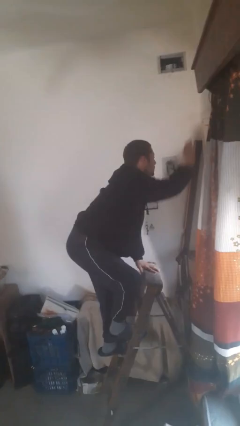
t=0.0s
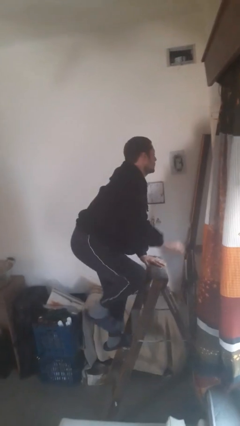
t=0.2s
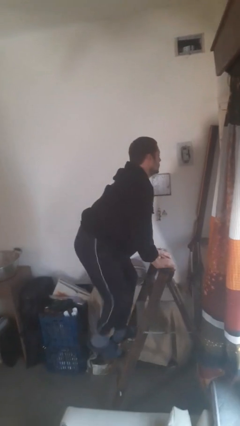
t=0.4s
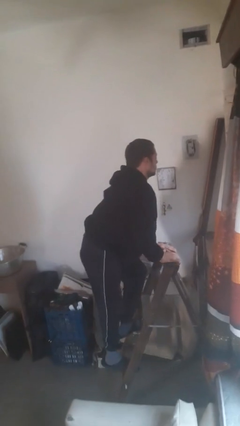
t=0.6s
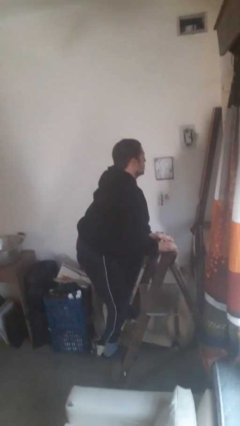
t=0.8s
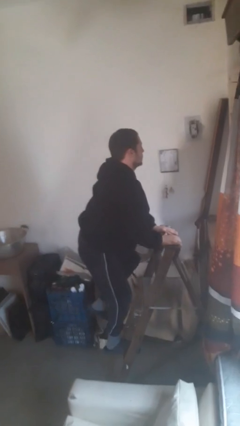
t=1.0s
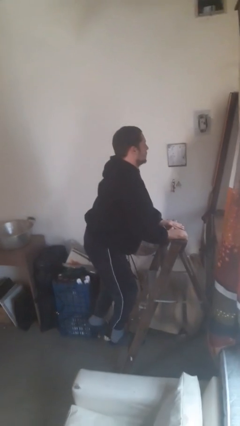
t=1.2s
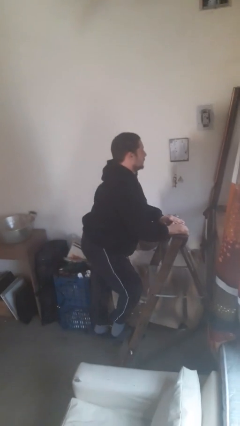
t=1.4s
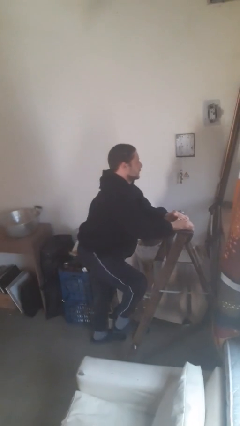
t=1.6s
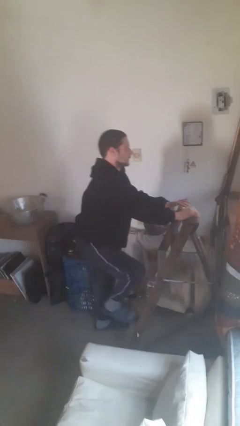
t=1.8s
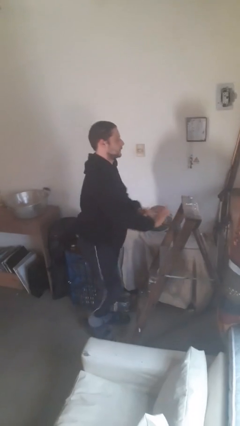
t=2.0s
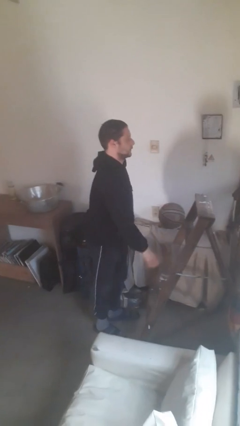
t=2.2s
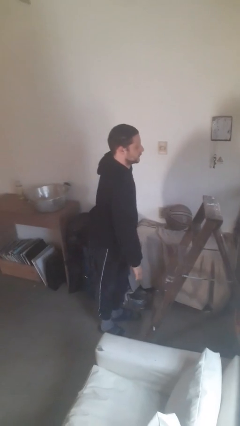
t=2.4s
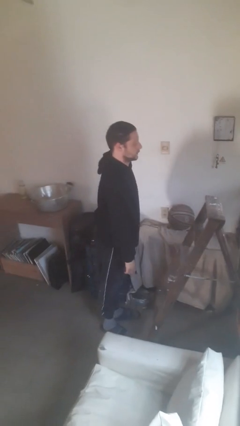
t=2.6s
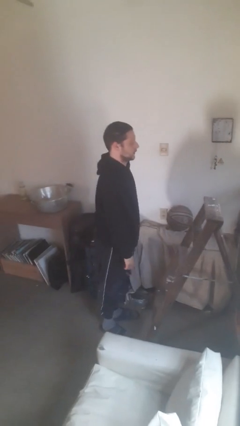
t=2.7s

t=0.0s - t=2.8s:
person climbs down ladder

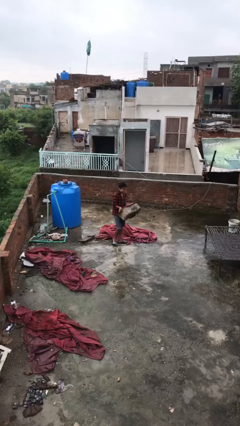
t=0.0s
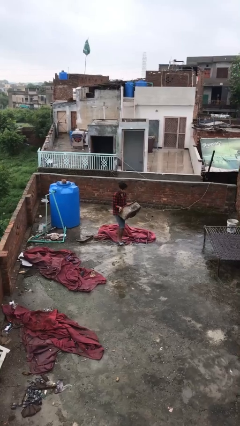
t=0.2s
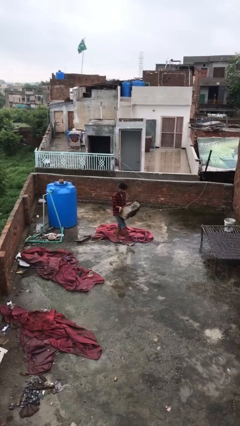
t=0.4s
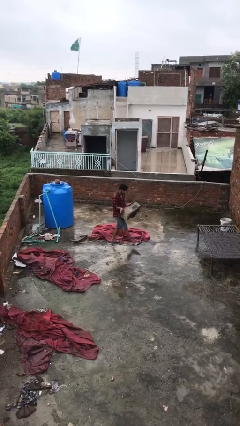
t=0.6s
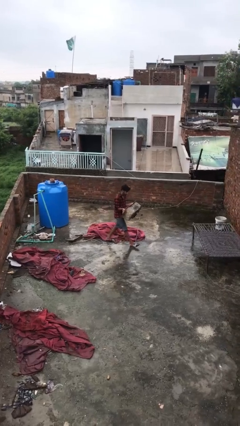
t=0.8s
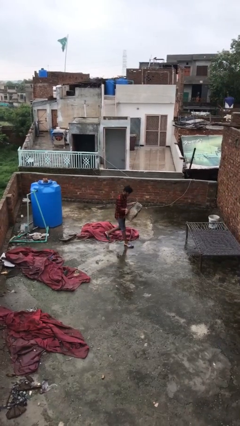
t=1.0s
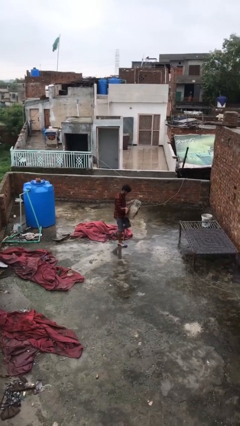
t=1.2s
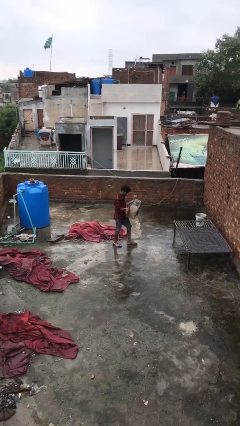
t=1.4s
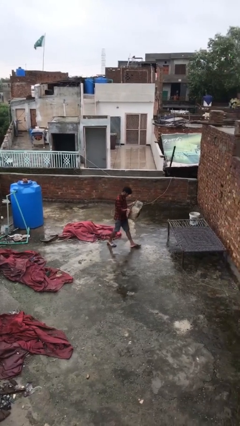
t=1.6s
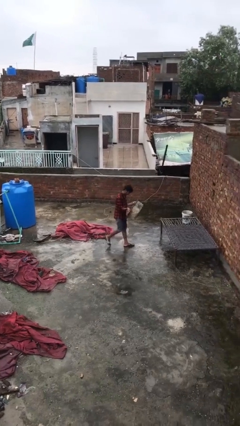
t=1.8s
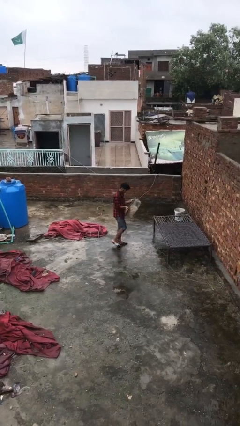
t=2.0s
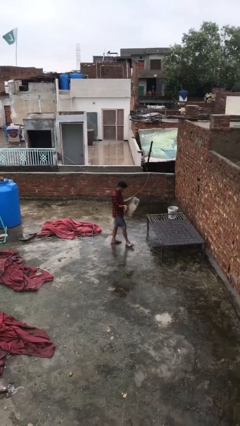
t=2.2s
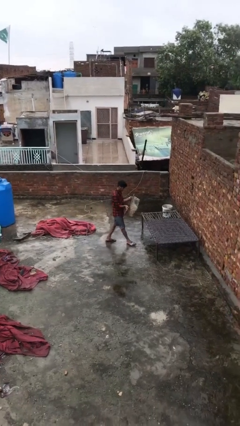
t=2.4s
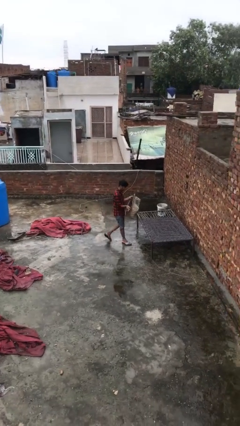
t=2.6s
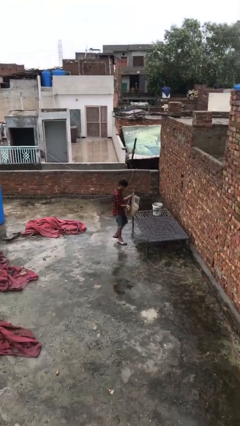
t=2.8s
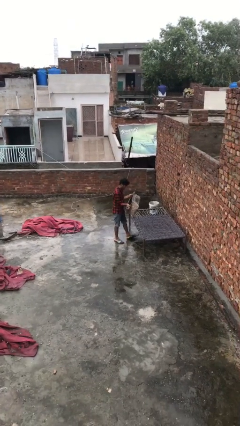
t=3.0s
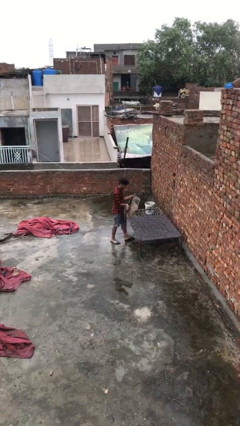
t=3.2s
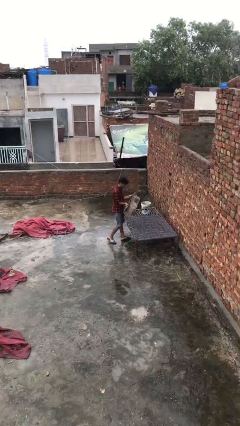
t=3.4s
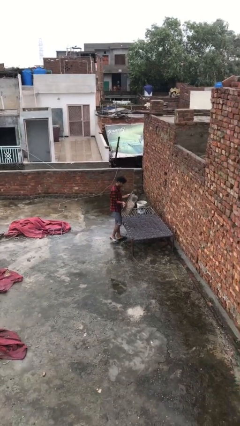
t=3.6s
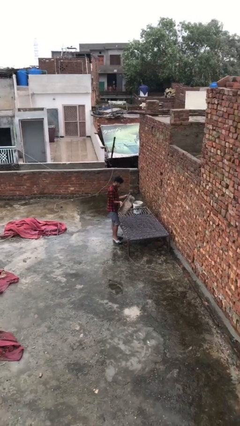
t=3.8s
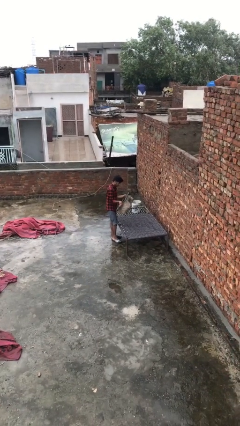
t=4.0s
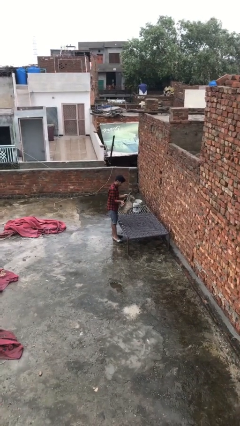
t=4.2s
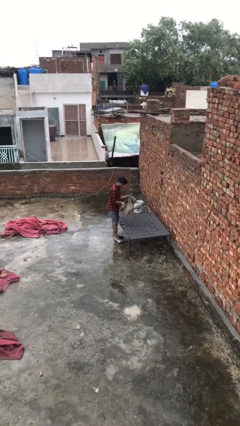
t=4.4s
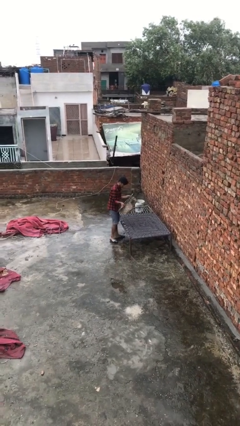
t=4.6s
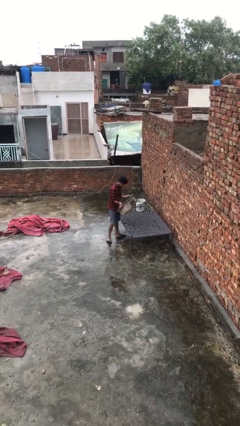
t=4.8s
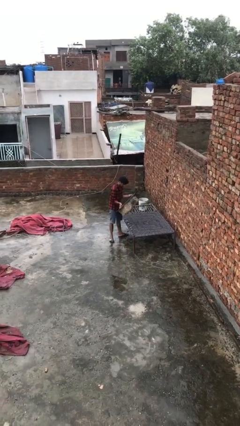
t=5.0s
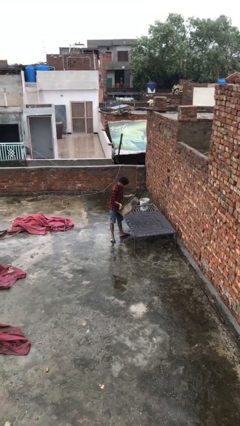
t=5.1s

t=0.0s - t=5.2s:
person carries heavy object

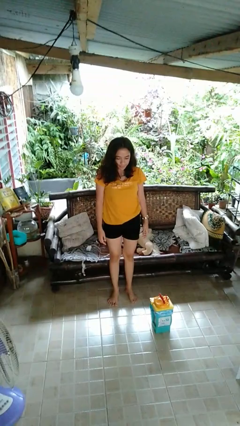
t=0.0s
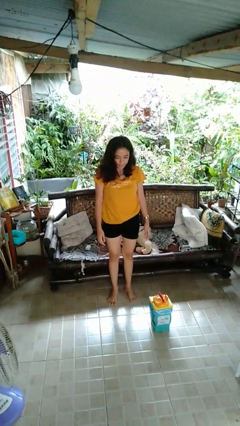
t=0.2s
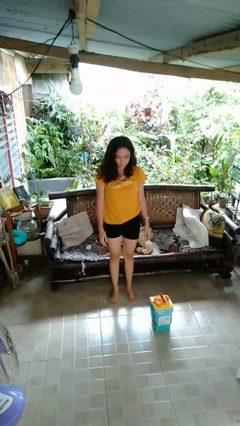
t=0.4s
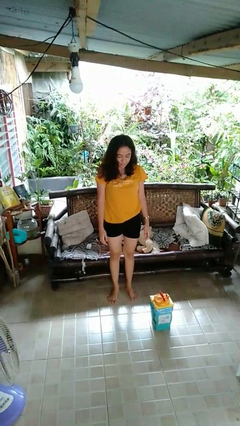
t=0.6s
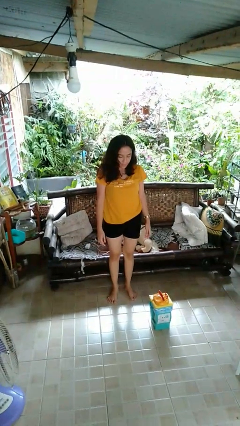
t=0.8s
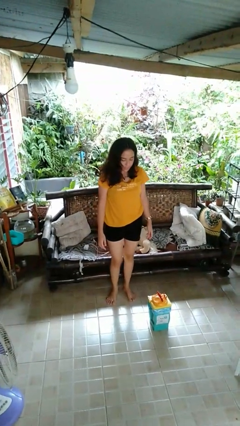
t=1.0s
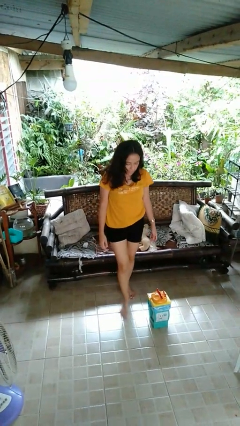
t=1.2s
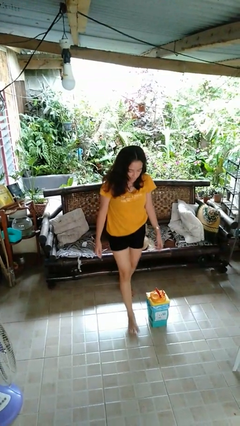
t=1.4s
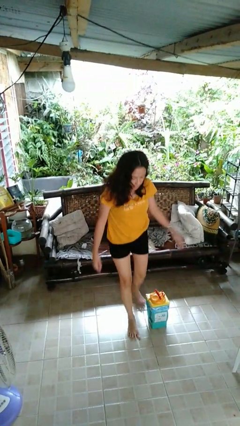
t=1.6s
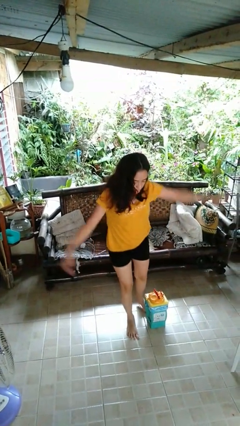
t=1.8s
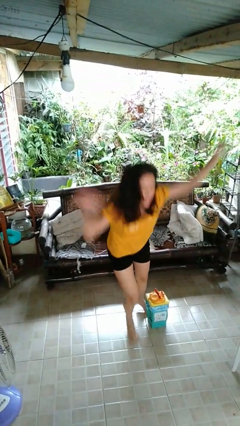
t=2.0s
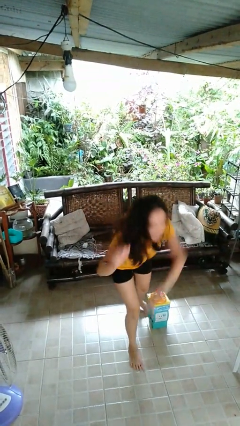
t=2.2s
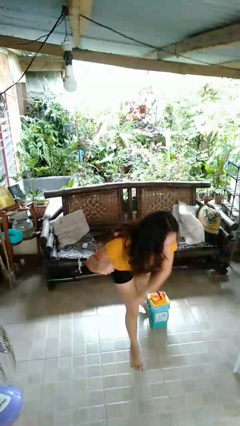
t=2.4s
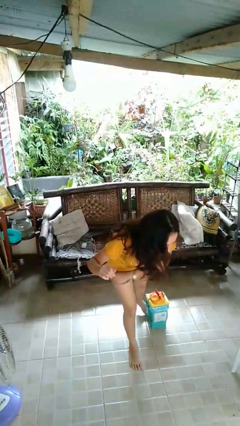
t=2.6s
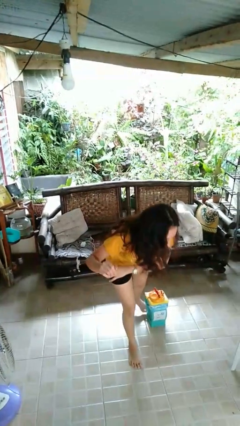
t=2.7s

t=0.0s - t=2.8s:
person trips on object on floor

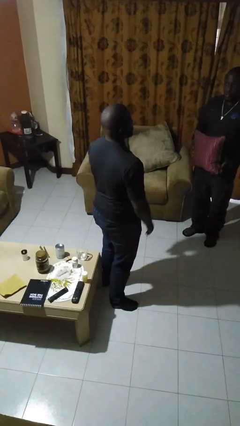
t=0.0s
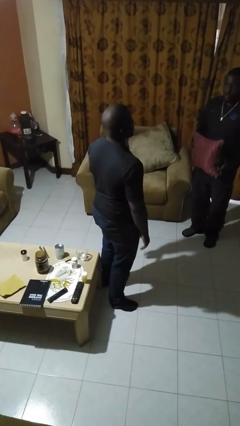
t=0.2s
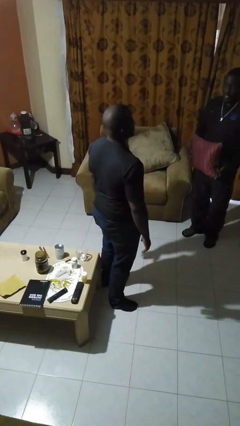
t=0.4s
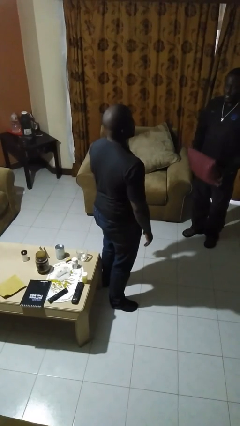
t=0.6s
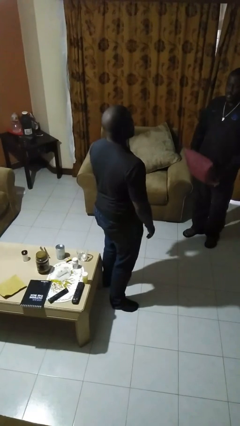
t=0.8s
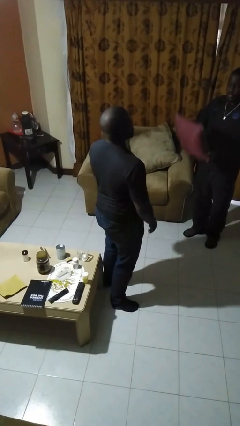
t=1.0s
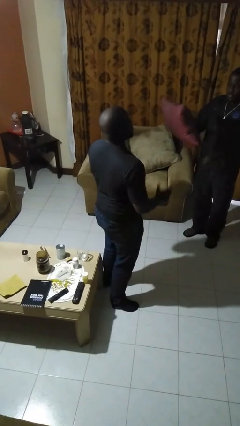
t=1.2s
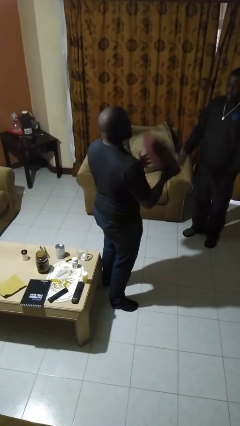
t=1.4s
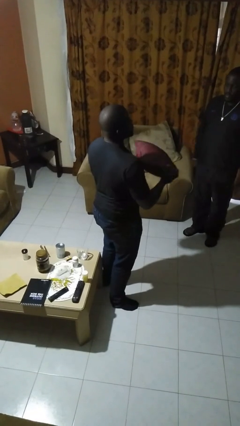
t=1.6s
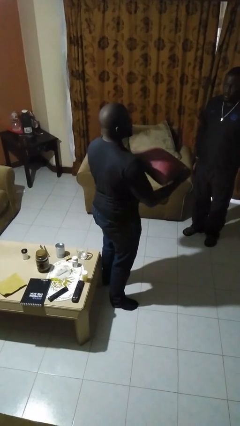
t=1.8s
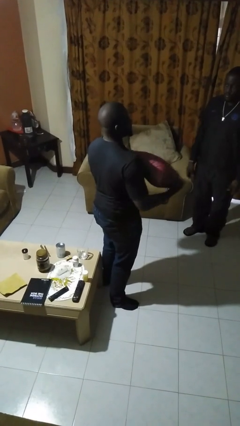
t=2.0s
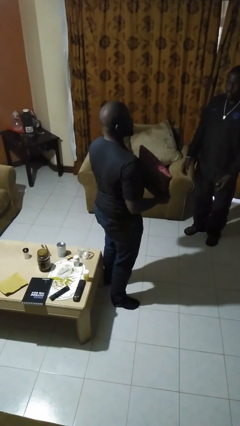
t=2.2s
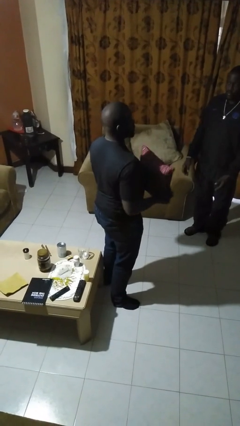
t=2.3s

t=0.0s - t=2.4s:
person catches object from person

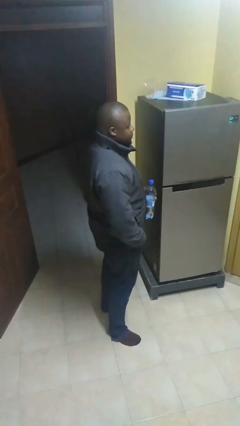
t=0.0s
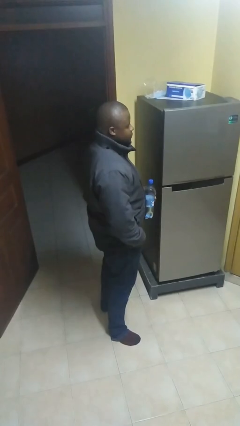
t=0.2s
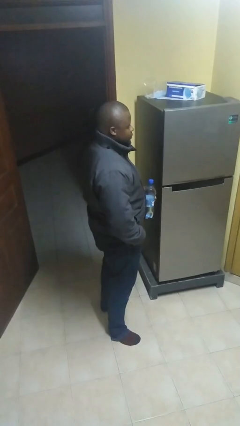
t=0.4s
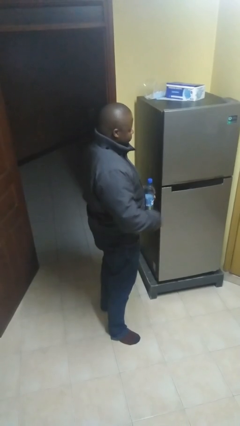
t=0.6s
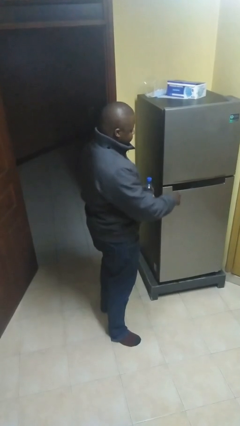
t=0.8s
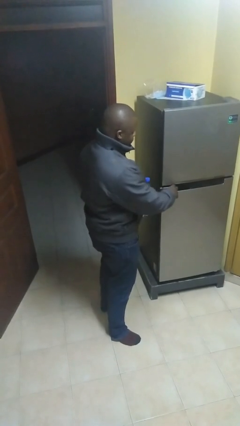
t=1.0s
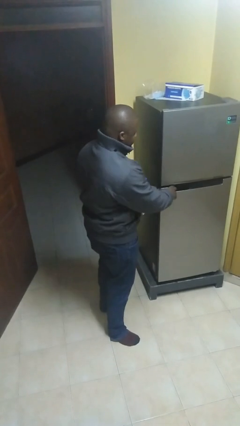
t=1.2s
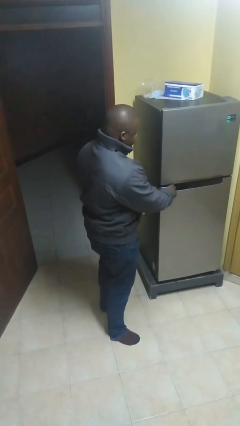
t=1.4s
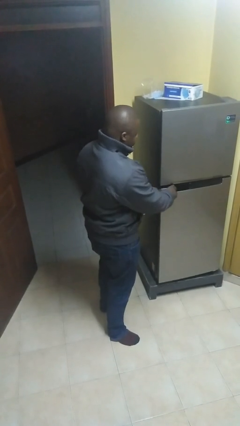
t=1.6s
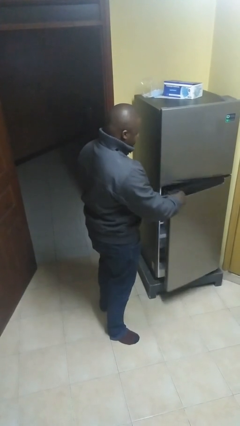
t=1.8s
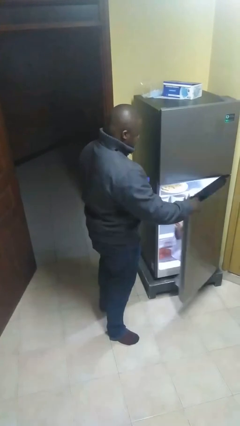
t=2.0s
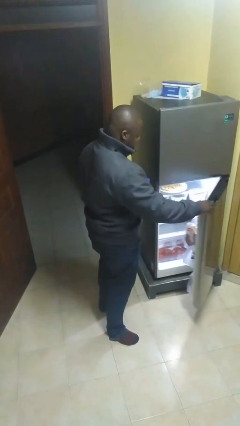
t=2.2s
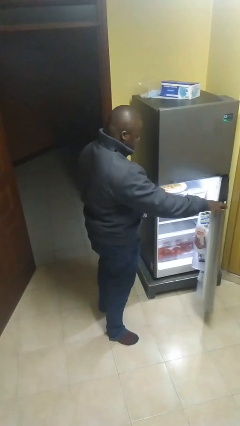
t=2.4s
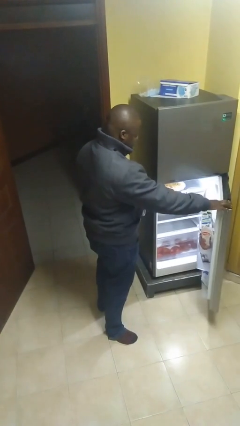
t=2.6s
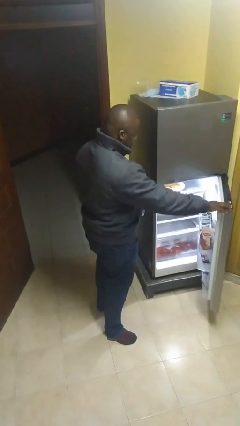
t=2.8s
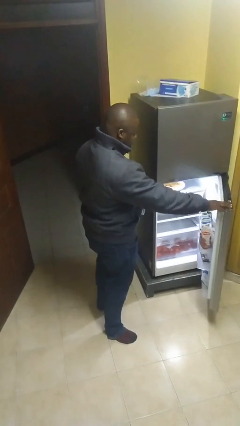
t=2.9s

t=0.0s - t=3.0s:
person opens refrigerator

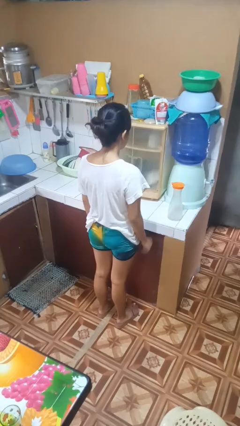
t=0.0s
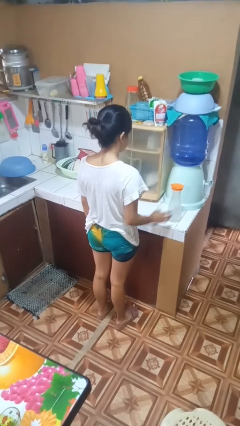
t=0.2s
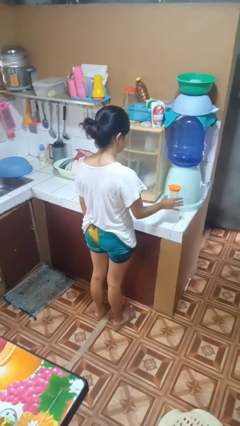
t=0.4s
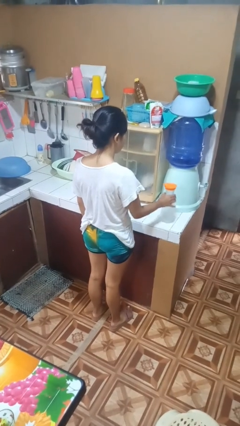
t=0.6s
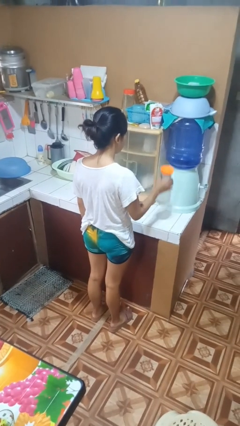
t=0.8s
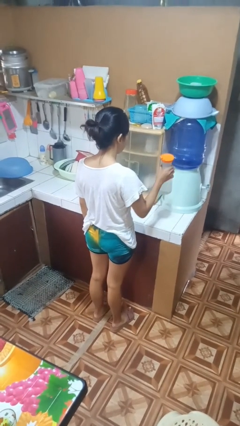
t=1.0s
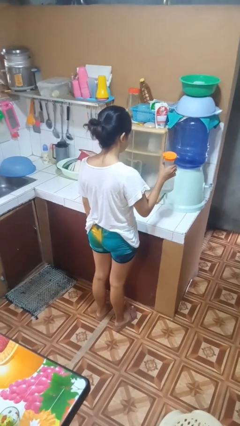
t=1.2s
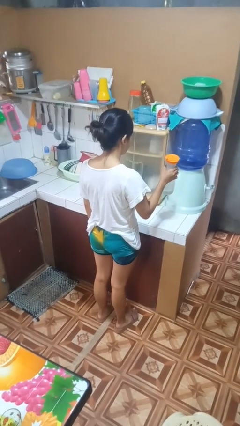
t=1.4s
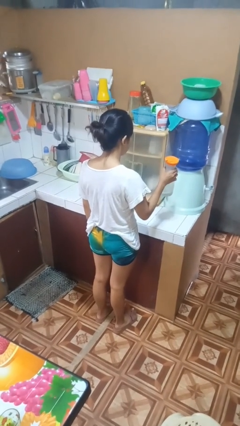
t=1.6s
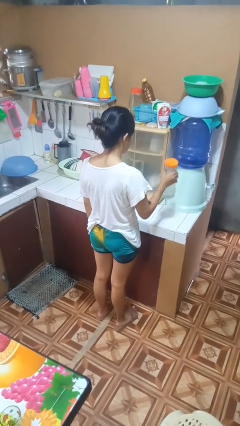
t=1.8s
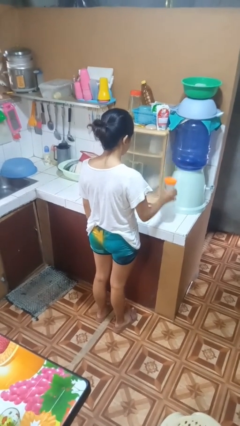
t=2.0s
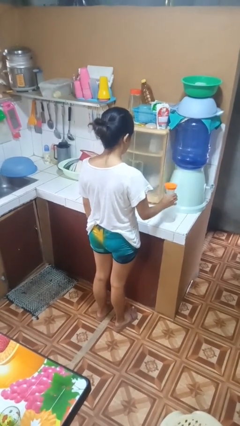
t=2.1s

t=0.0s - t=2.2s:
person picks up object from countertop
